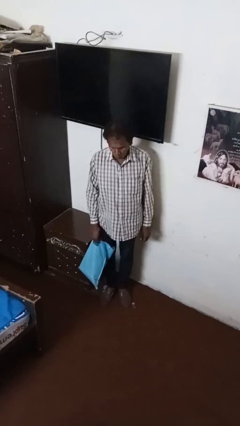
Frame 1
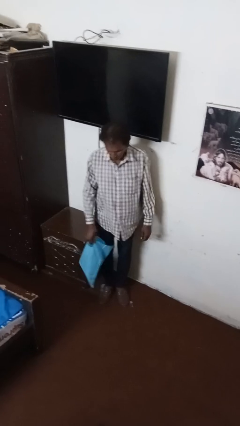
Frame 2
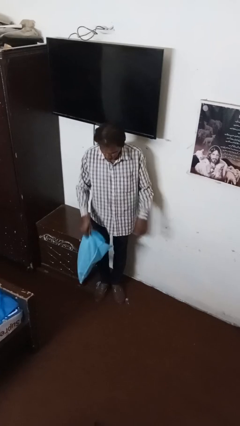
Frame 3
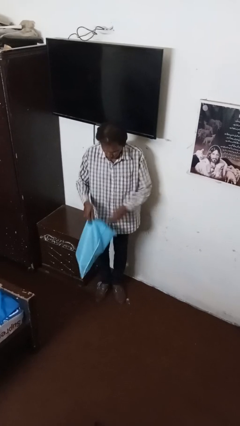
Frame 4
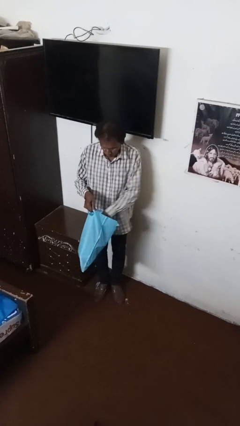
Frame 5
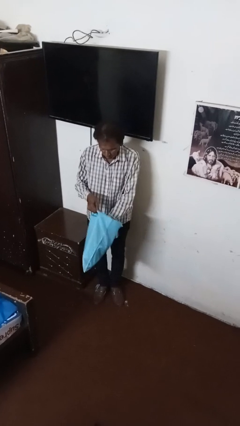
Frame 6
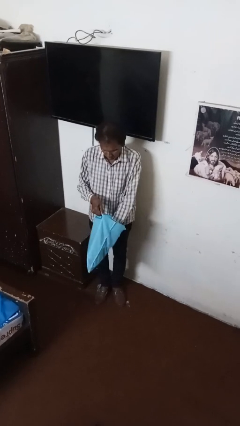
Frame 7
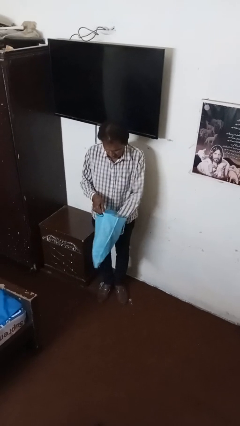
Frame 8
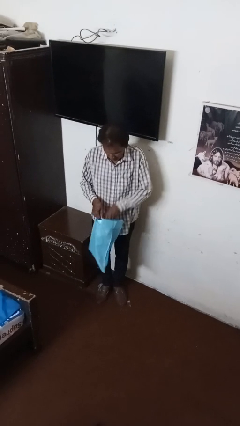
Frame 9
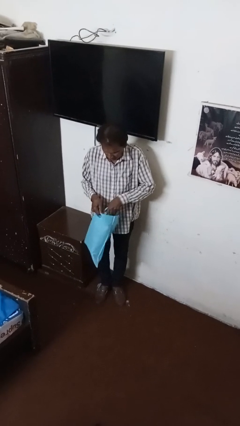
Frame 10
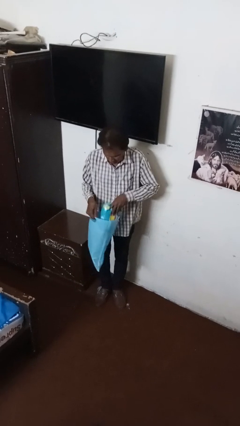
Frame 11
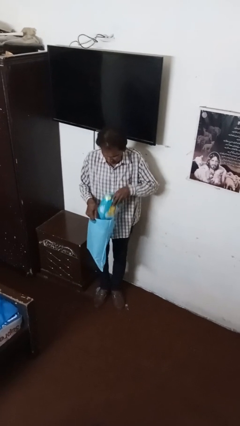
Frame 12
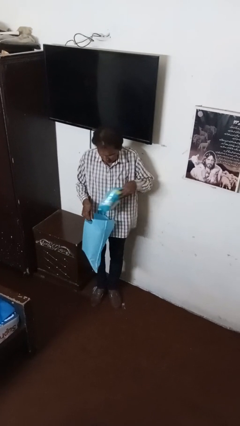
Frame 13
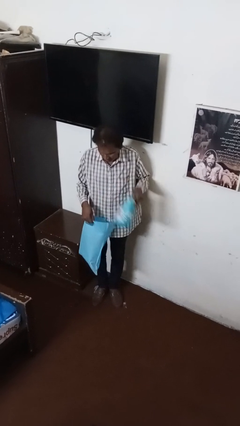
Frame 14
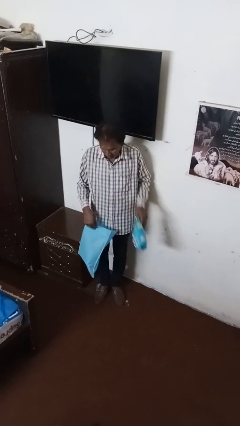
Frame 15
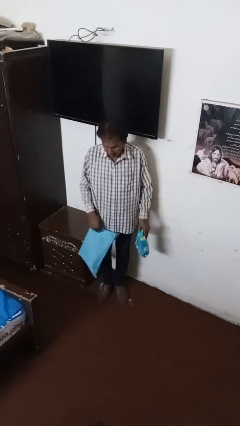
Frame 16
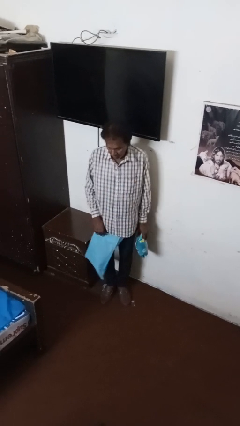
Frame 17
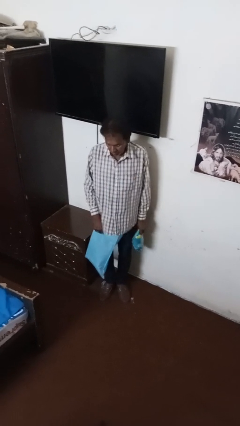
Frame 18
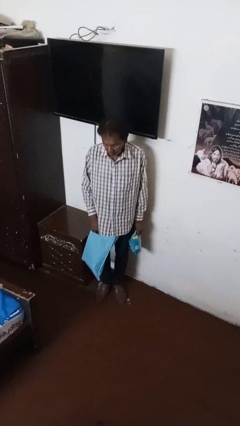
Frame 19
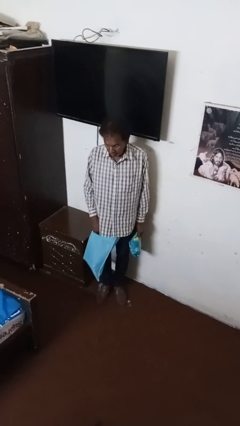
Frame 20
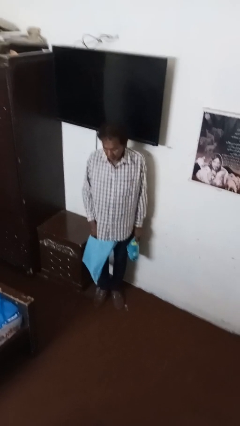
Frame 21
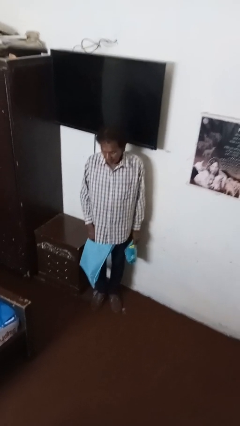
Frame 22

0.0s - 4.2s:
person searches in bag

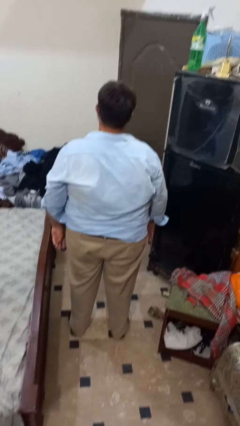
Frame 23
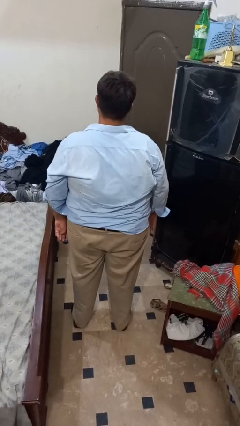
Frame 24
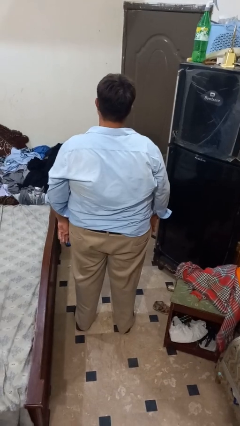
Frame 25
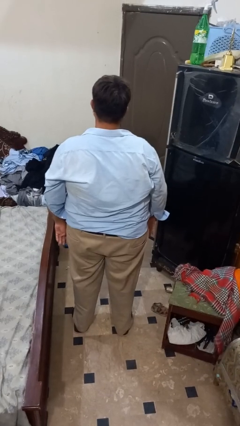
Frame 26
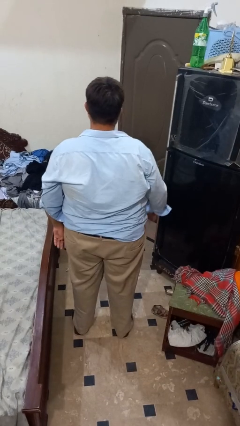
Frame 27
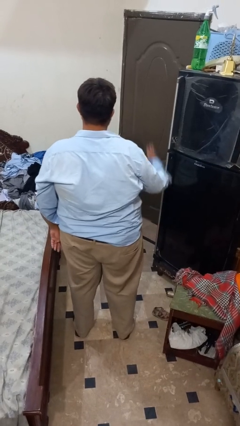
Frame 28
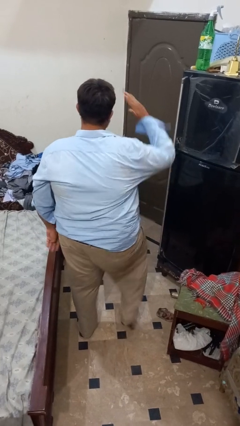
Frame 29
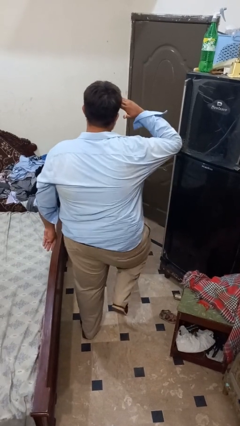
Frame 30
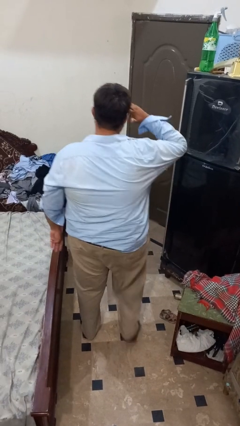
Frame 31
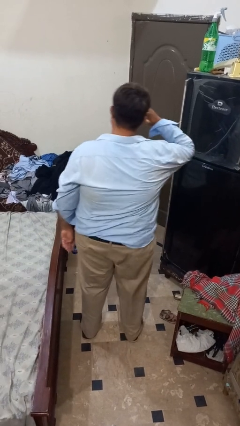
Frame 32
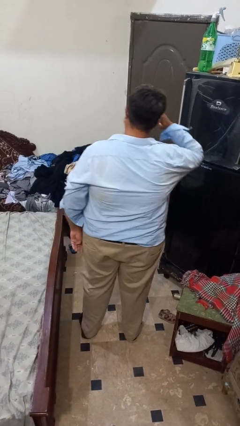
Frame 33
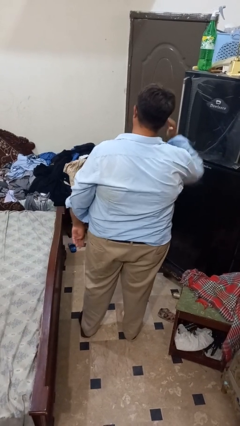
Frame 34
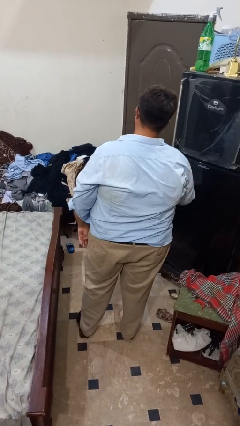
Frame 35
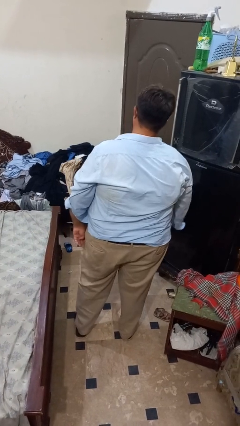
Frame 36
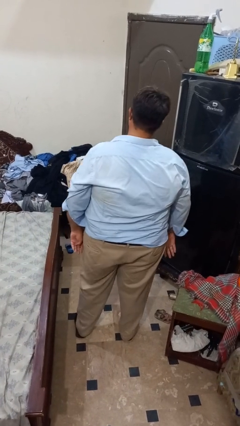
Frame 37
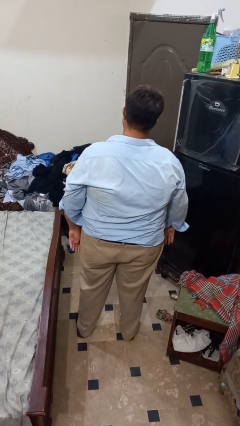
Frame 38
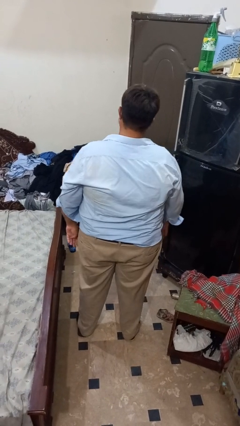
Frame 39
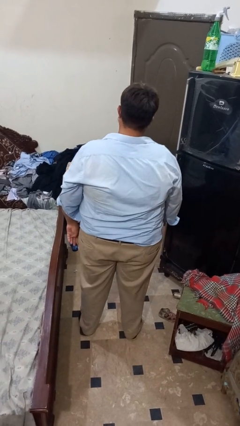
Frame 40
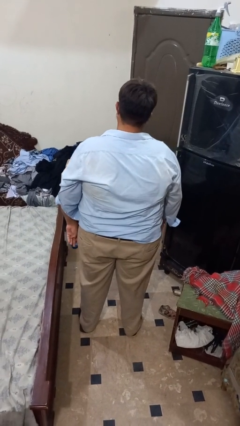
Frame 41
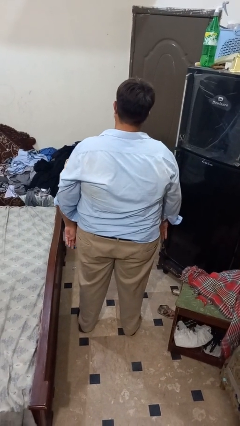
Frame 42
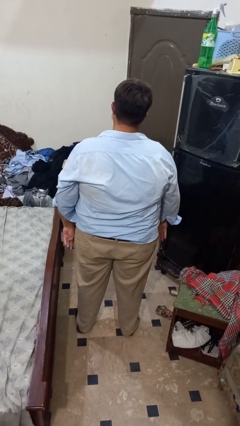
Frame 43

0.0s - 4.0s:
person salutes

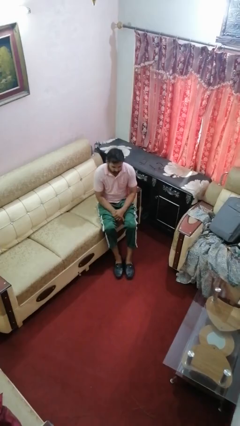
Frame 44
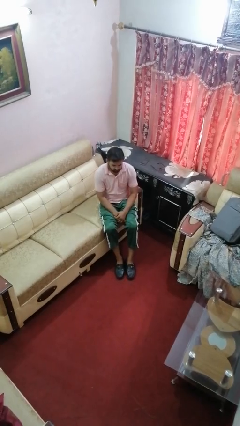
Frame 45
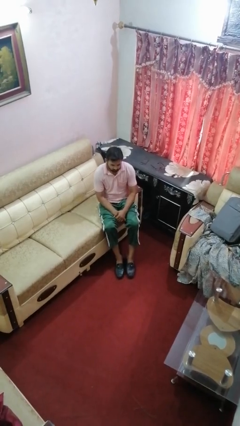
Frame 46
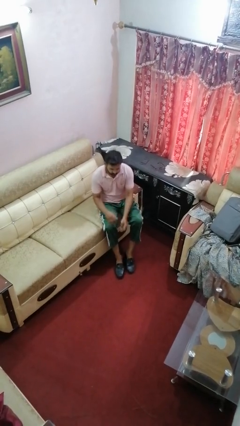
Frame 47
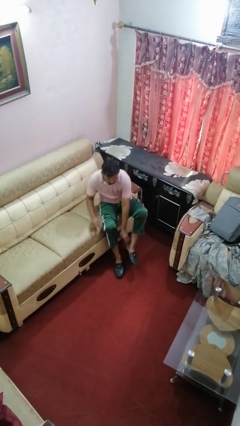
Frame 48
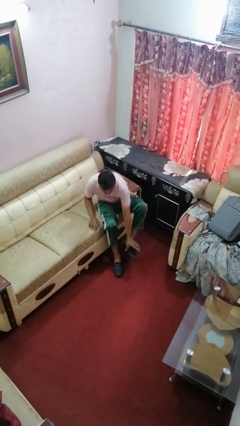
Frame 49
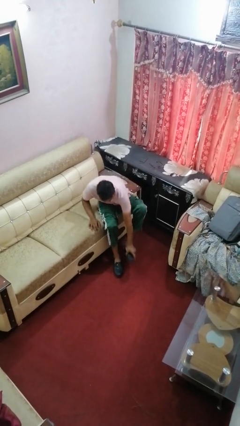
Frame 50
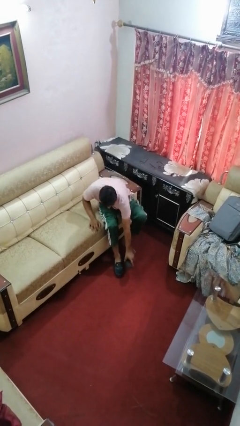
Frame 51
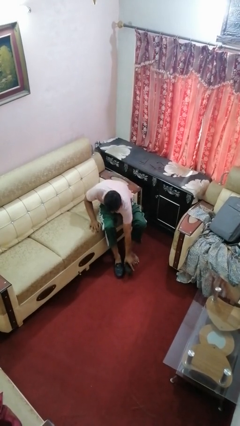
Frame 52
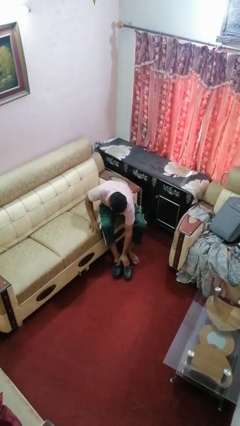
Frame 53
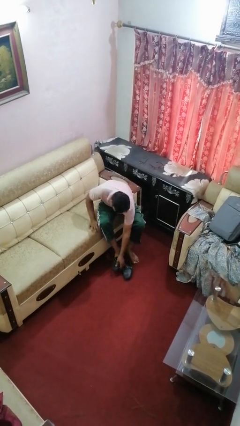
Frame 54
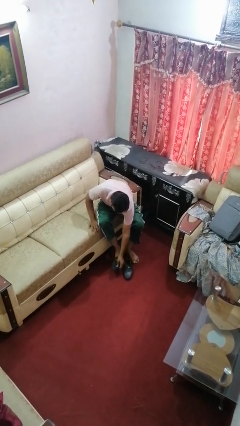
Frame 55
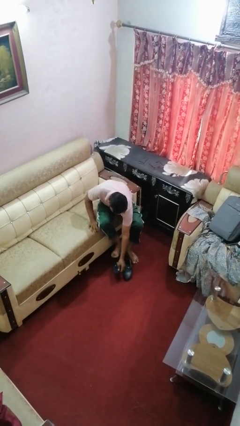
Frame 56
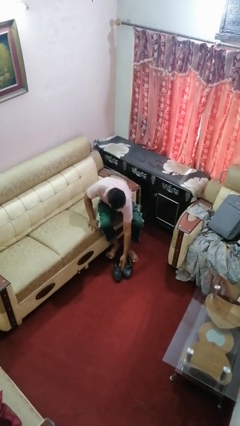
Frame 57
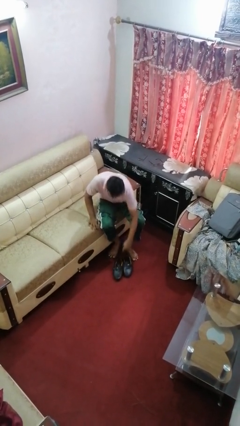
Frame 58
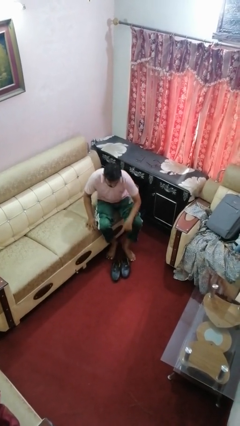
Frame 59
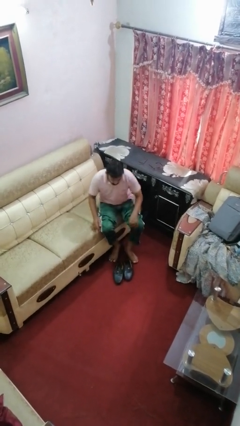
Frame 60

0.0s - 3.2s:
person takes off shoes

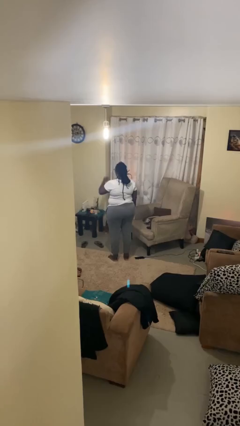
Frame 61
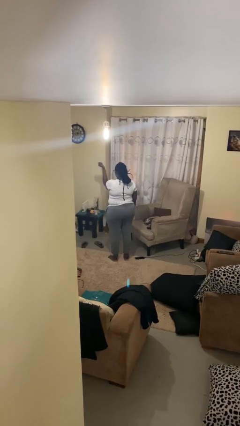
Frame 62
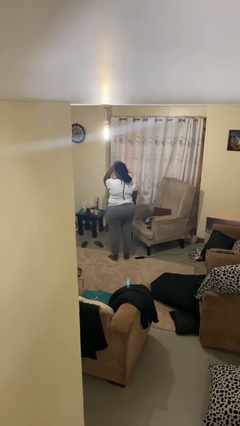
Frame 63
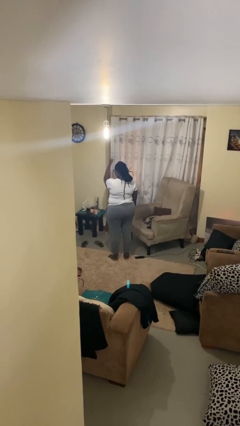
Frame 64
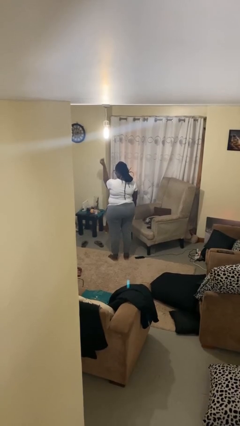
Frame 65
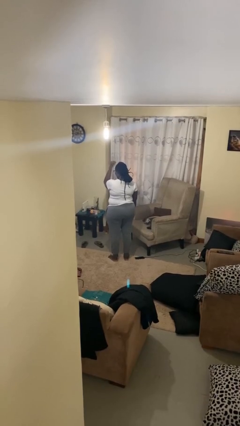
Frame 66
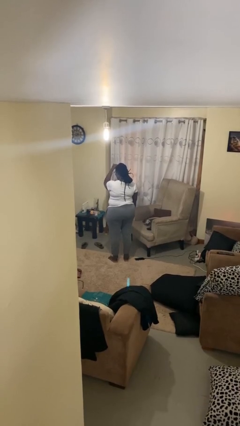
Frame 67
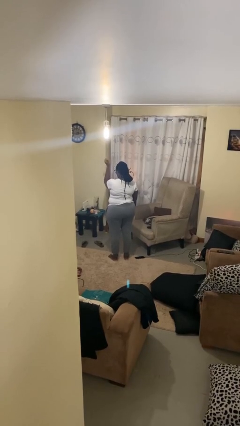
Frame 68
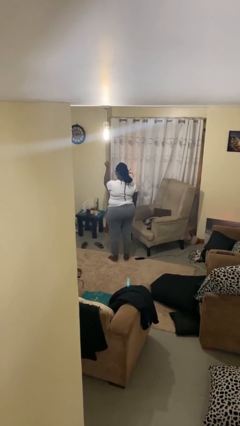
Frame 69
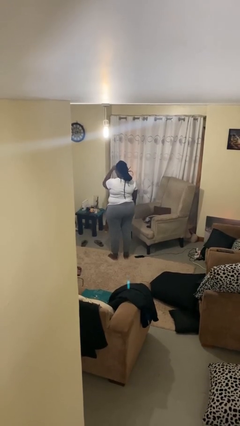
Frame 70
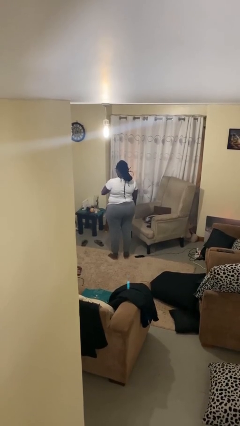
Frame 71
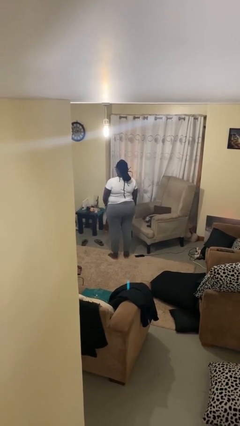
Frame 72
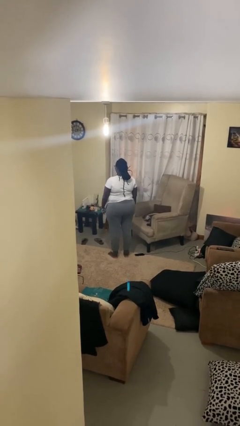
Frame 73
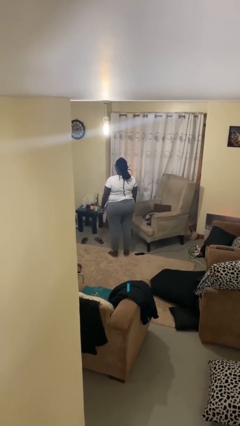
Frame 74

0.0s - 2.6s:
person snaps fingers

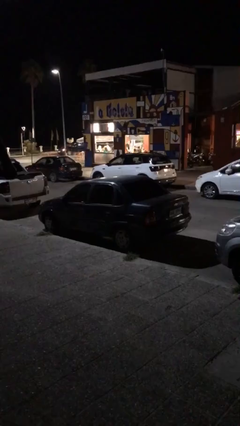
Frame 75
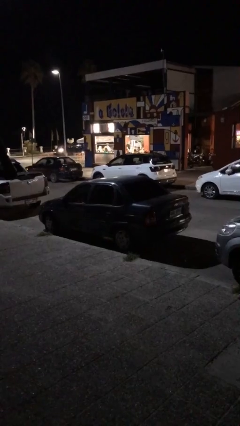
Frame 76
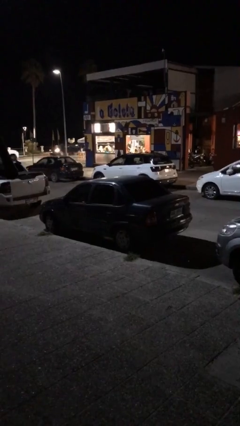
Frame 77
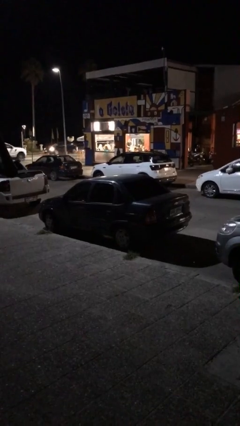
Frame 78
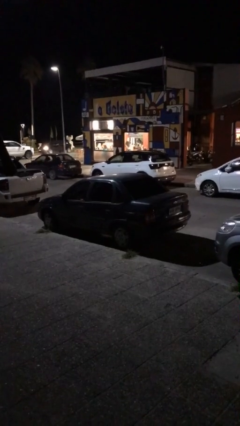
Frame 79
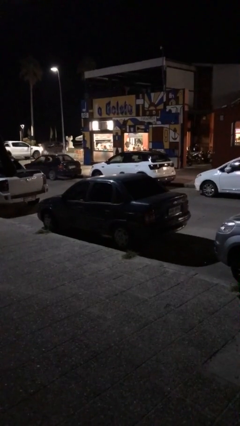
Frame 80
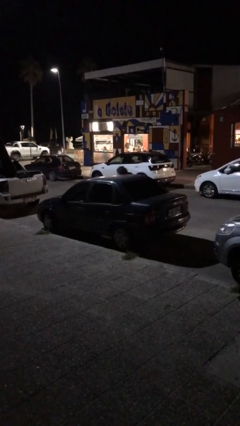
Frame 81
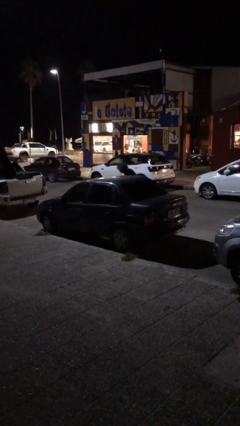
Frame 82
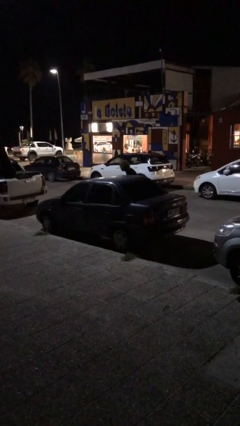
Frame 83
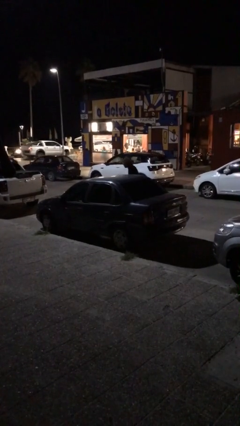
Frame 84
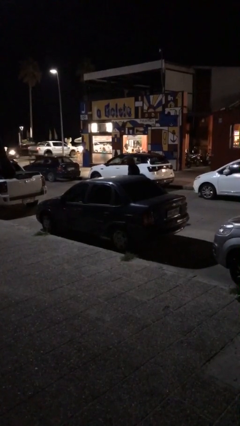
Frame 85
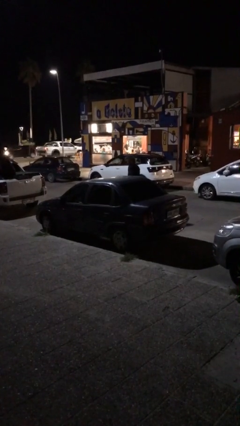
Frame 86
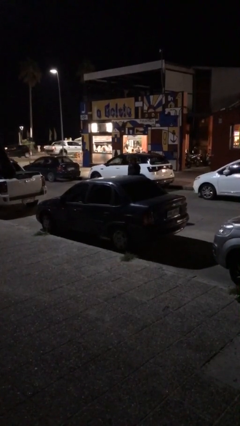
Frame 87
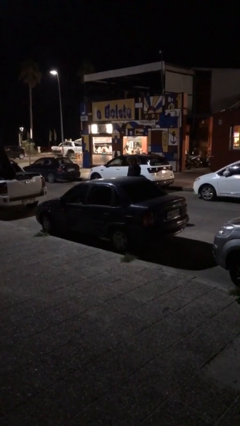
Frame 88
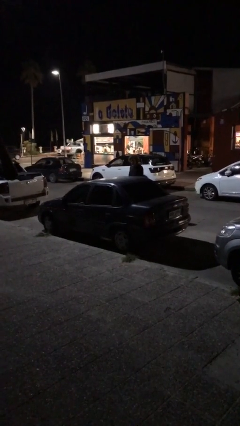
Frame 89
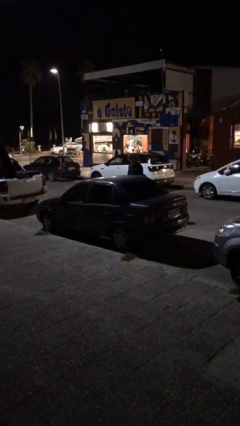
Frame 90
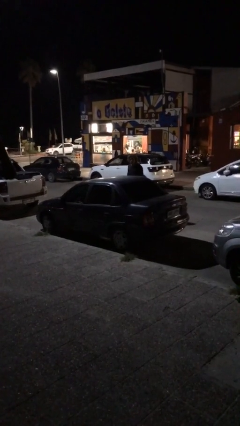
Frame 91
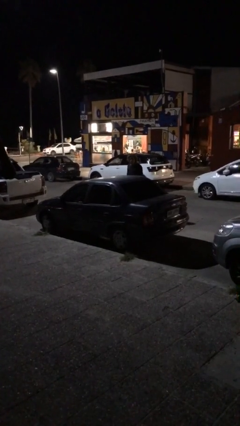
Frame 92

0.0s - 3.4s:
car drops off person

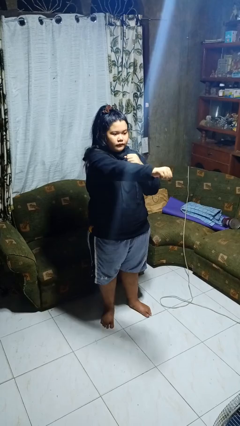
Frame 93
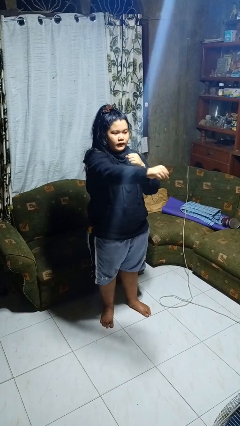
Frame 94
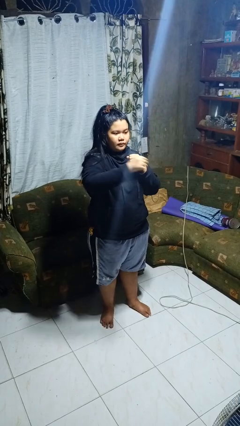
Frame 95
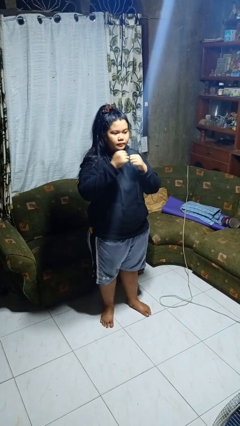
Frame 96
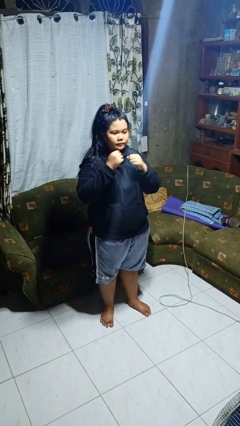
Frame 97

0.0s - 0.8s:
person punches
